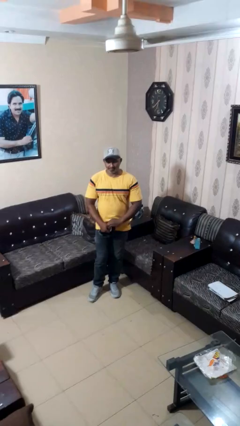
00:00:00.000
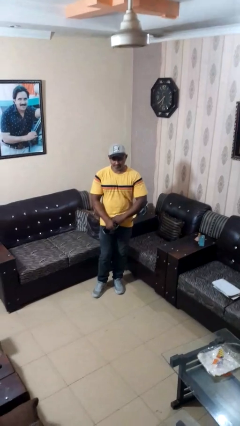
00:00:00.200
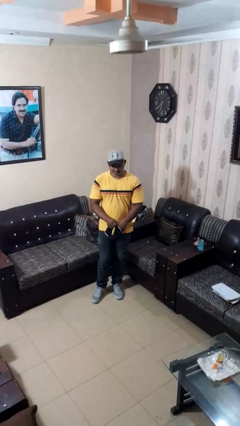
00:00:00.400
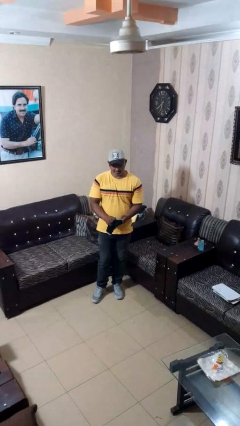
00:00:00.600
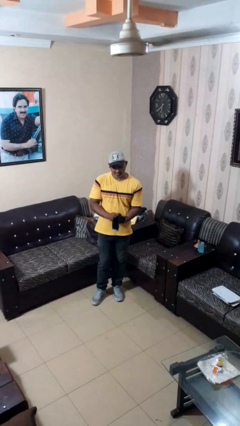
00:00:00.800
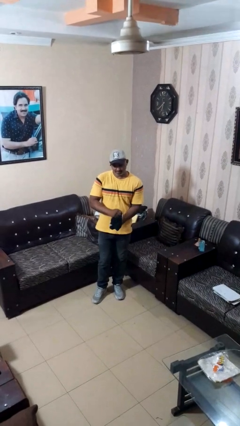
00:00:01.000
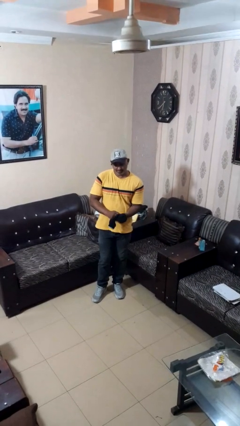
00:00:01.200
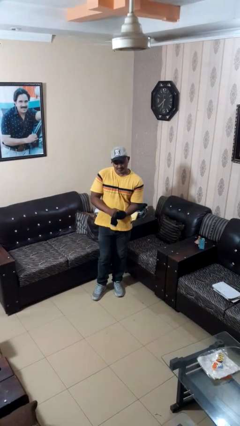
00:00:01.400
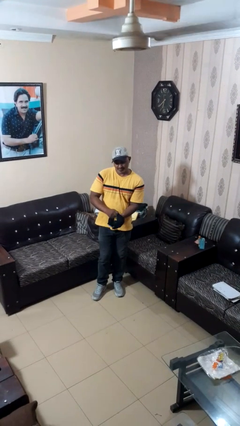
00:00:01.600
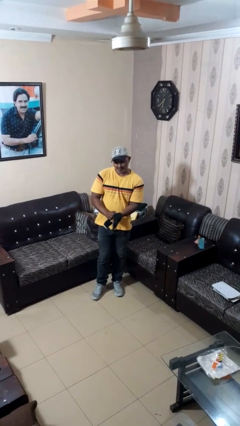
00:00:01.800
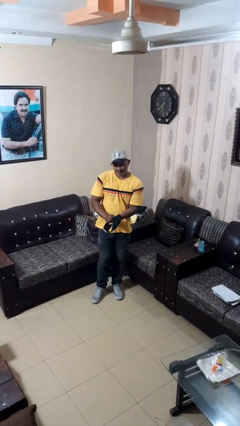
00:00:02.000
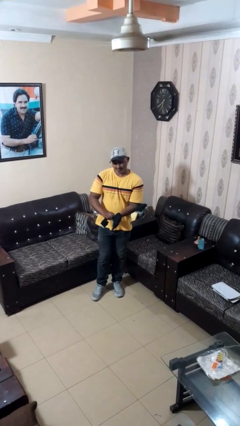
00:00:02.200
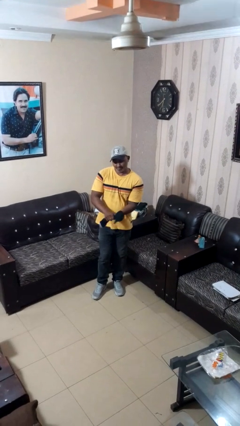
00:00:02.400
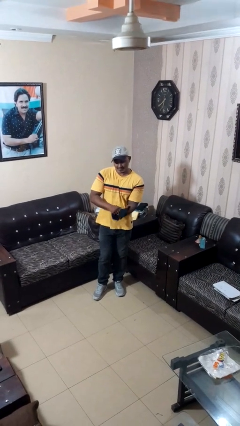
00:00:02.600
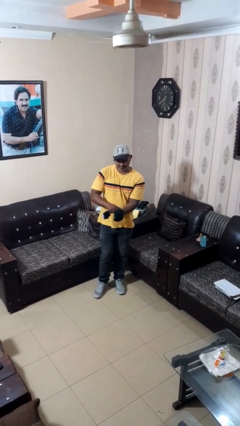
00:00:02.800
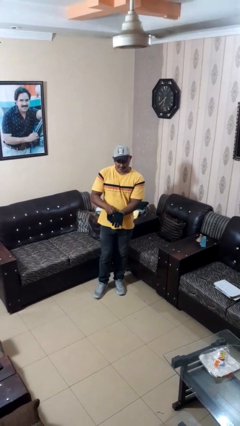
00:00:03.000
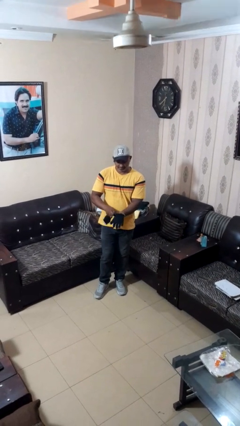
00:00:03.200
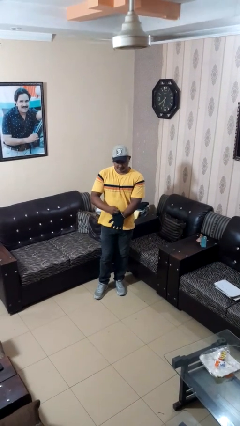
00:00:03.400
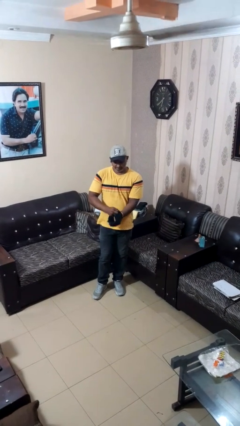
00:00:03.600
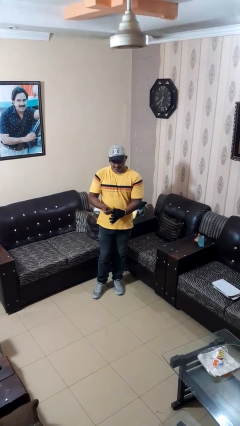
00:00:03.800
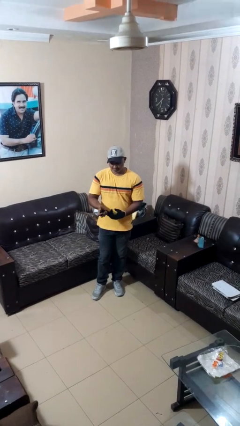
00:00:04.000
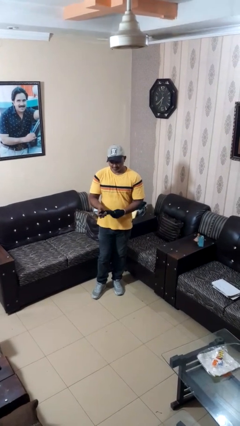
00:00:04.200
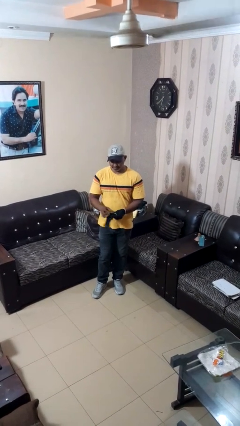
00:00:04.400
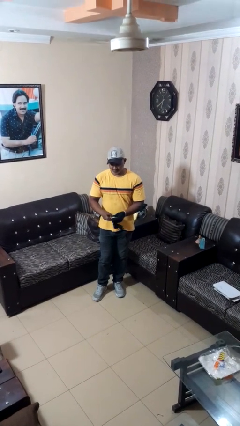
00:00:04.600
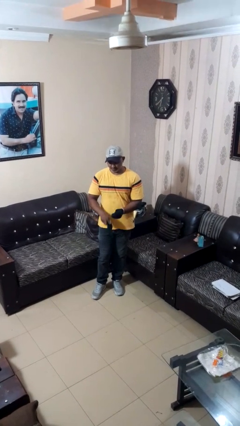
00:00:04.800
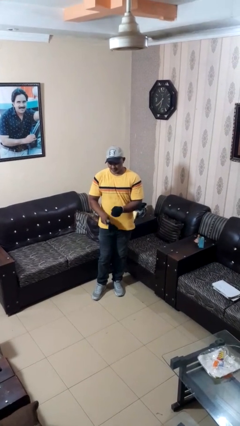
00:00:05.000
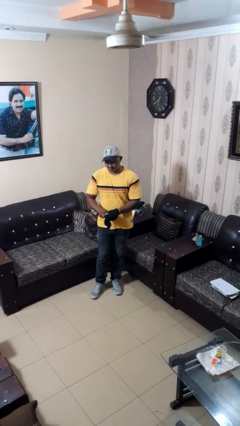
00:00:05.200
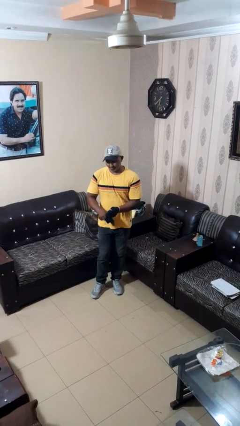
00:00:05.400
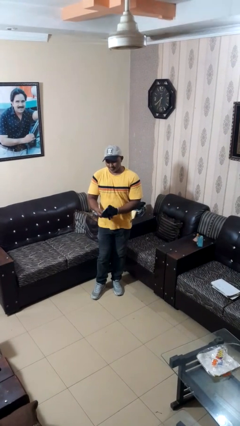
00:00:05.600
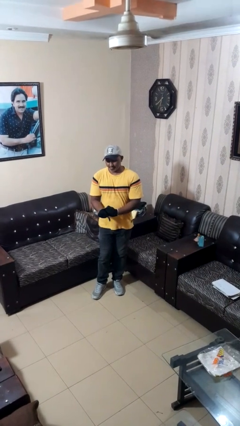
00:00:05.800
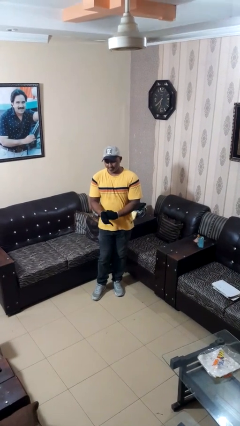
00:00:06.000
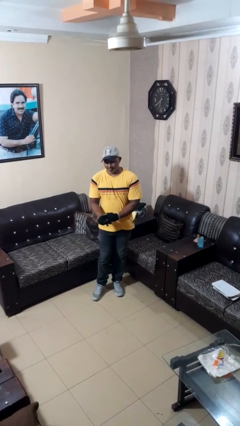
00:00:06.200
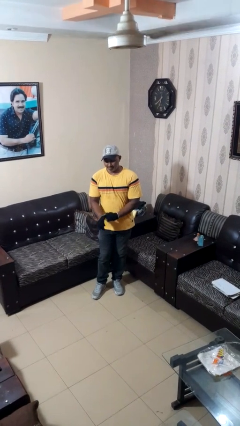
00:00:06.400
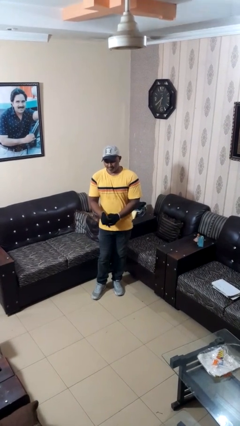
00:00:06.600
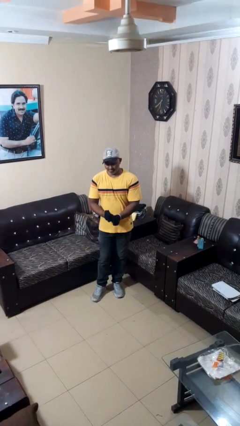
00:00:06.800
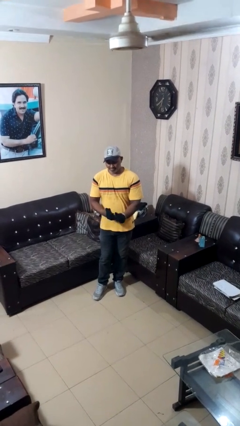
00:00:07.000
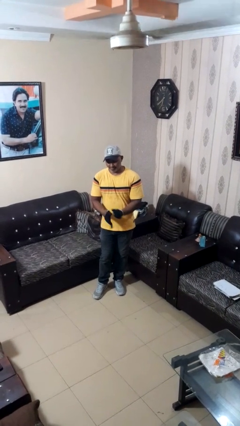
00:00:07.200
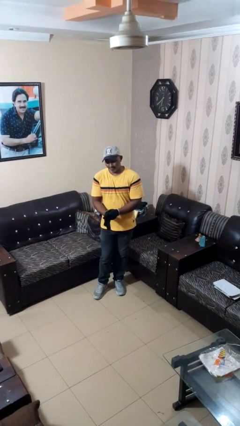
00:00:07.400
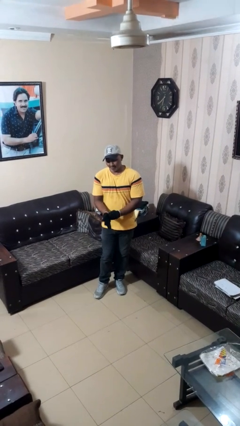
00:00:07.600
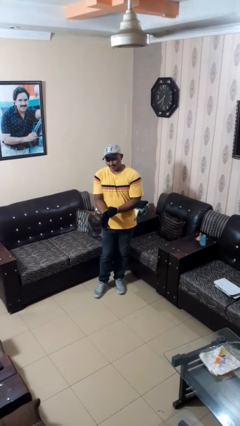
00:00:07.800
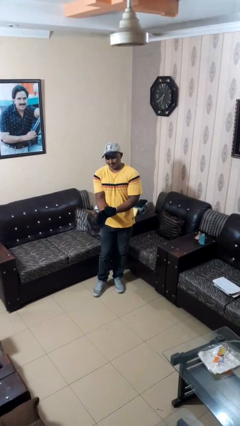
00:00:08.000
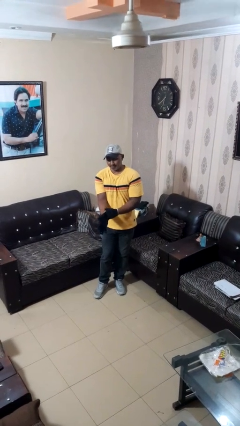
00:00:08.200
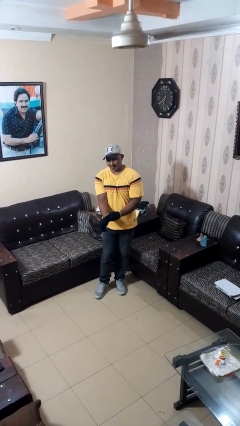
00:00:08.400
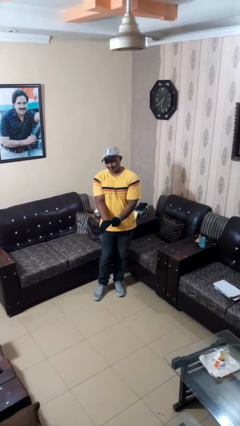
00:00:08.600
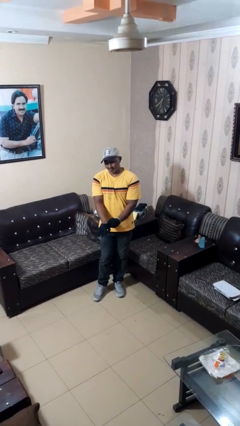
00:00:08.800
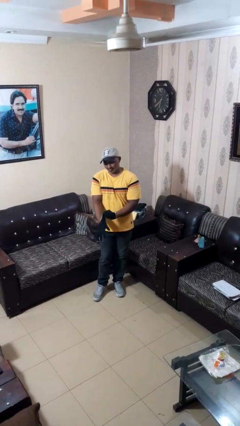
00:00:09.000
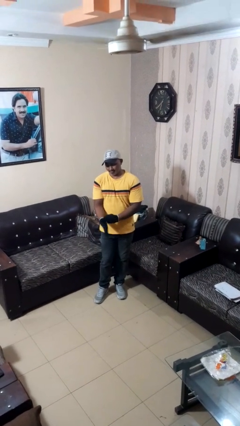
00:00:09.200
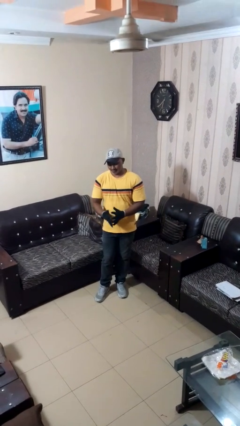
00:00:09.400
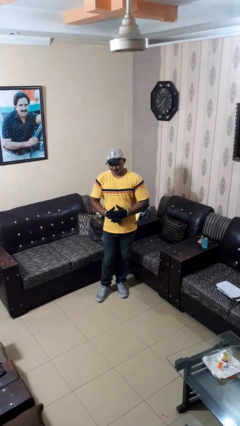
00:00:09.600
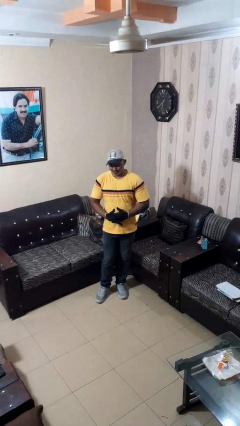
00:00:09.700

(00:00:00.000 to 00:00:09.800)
person puts on gloves

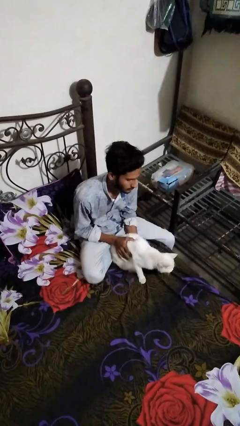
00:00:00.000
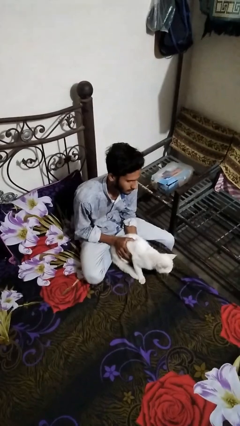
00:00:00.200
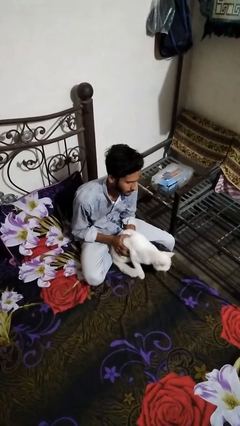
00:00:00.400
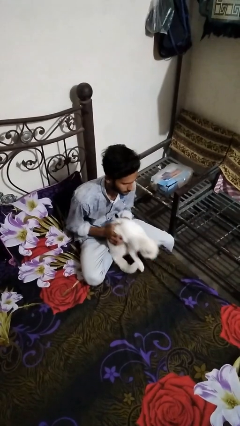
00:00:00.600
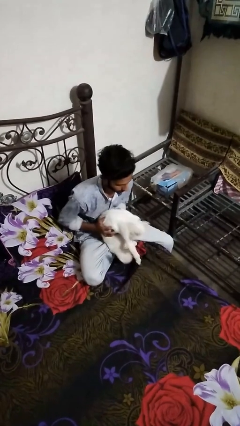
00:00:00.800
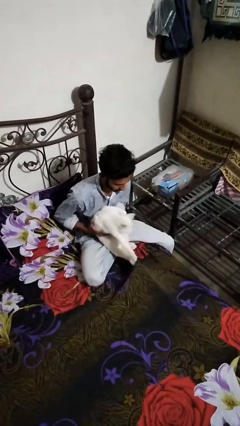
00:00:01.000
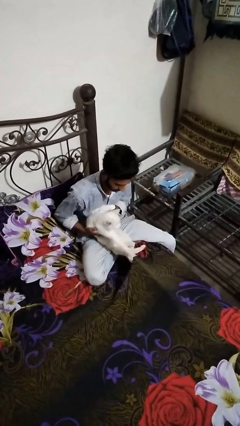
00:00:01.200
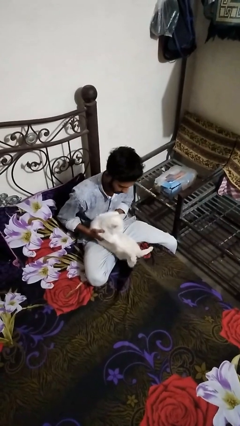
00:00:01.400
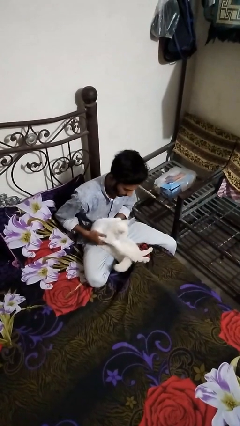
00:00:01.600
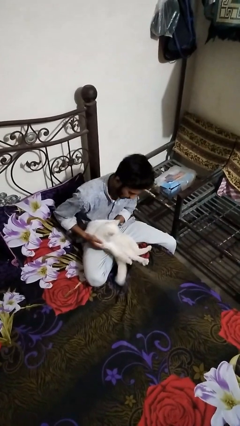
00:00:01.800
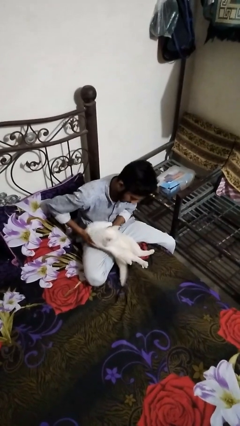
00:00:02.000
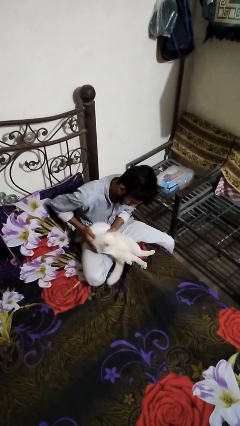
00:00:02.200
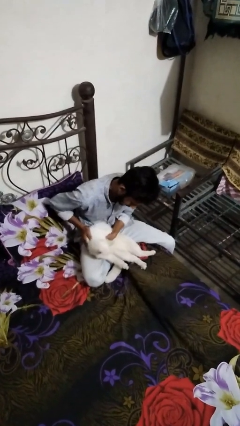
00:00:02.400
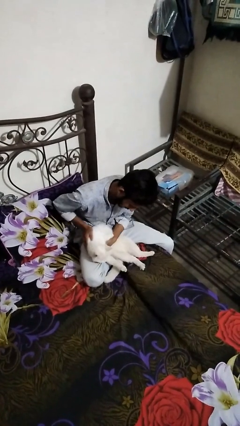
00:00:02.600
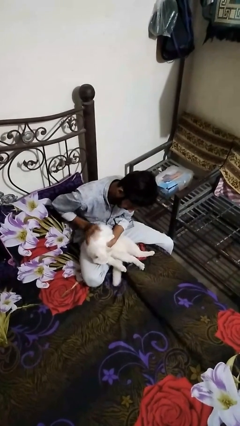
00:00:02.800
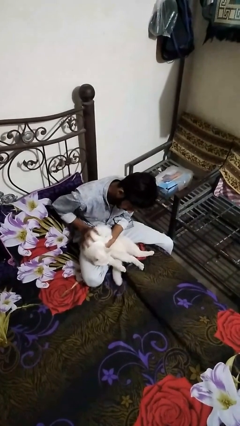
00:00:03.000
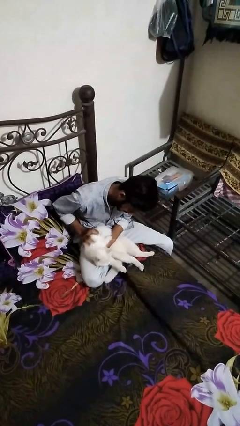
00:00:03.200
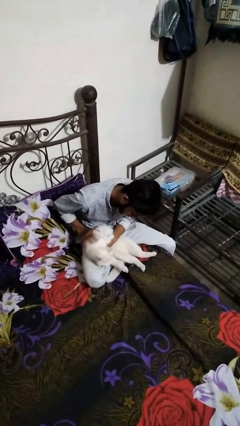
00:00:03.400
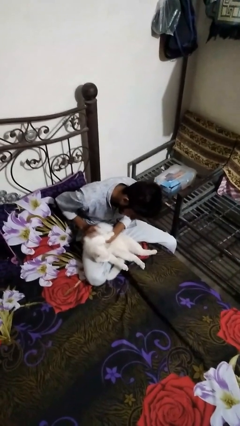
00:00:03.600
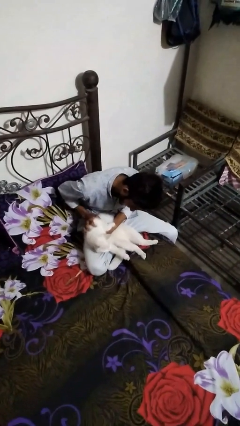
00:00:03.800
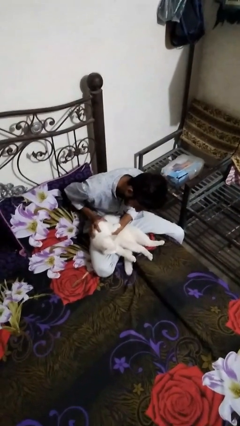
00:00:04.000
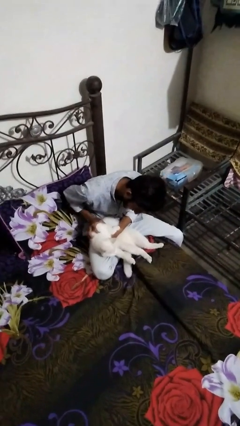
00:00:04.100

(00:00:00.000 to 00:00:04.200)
person pets cat

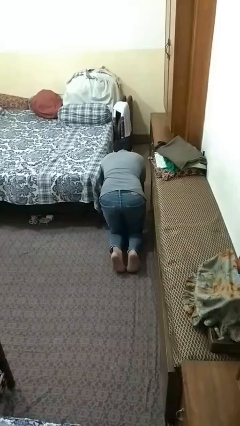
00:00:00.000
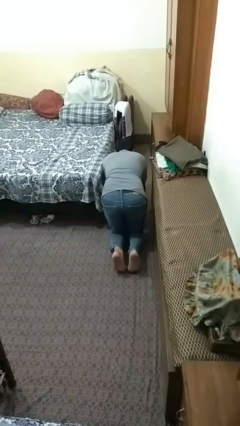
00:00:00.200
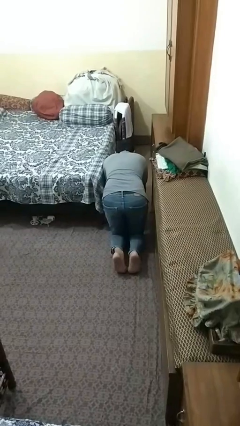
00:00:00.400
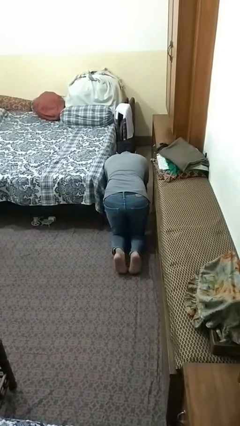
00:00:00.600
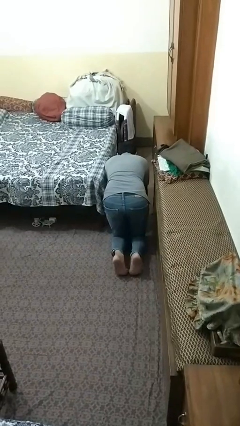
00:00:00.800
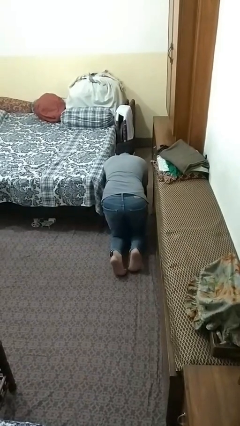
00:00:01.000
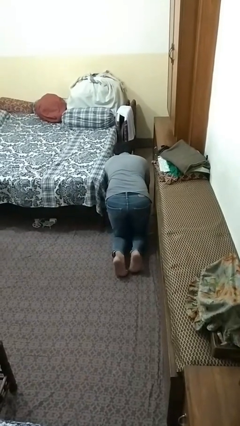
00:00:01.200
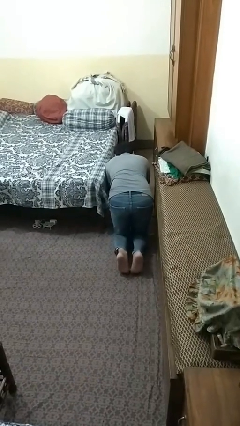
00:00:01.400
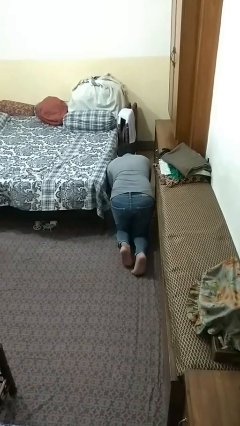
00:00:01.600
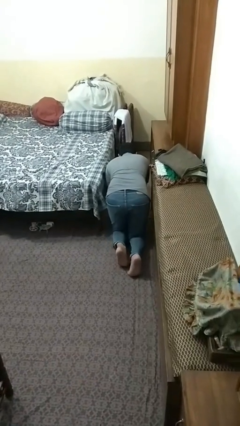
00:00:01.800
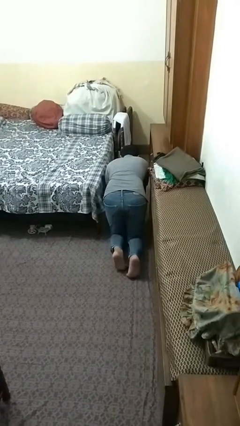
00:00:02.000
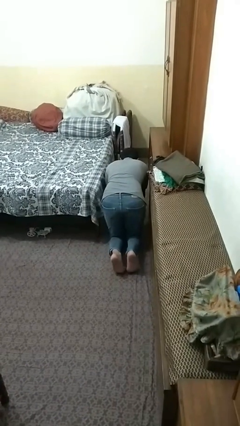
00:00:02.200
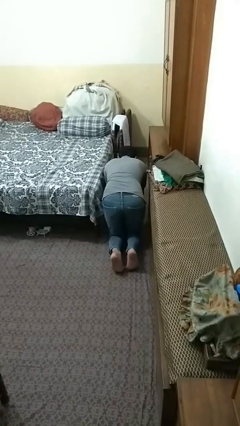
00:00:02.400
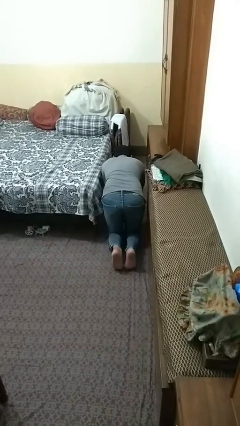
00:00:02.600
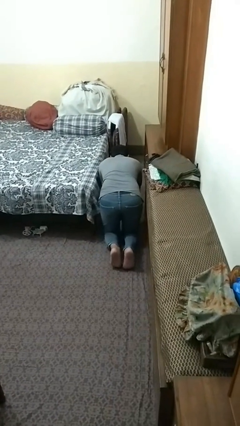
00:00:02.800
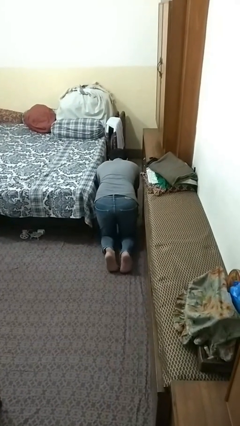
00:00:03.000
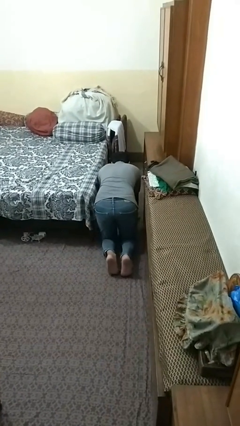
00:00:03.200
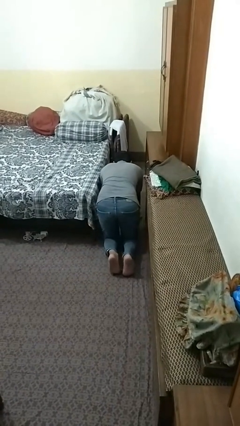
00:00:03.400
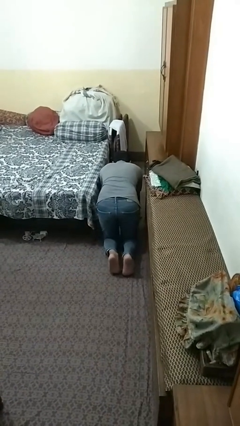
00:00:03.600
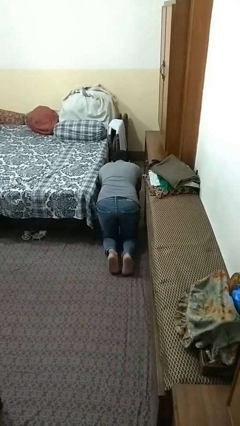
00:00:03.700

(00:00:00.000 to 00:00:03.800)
person crawls
